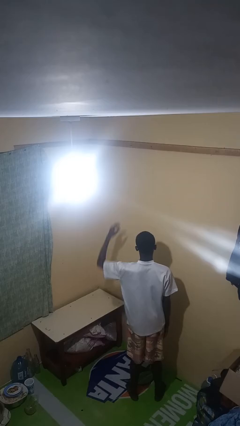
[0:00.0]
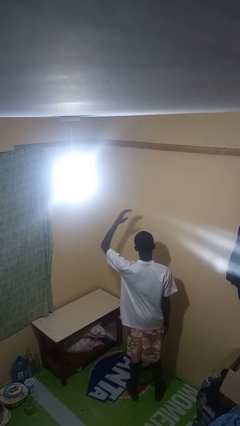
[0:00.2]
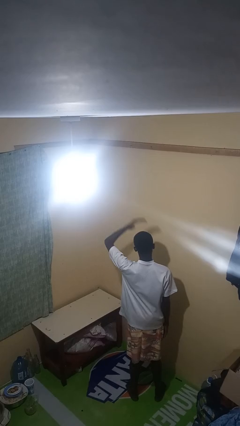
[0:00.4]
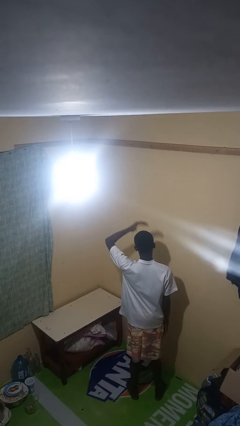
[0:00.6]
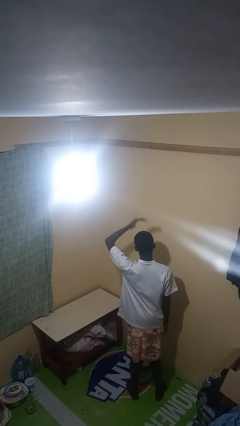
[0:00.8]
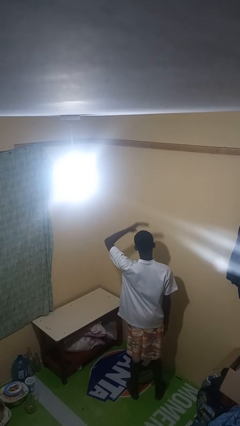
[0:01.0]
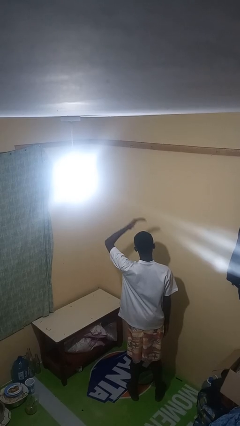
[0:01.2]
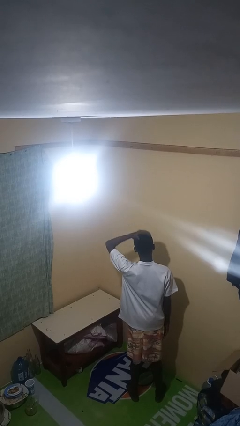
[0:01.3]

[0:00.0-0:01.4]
person pats head

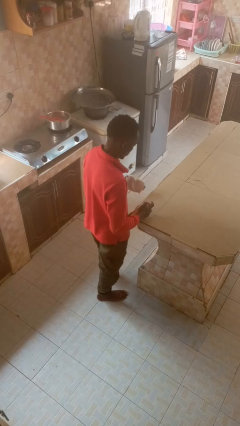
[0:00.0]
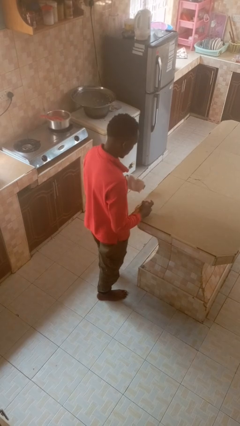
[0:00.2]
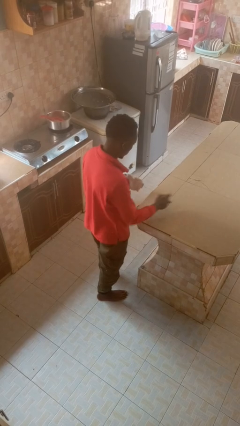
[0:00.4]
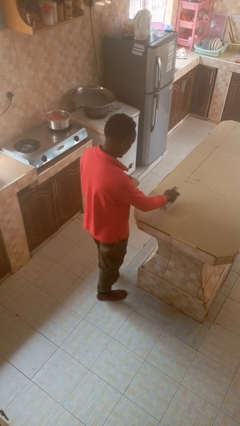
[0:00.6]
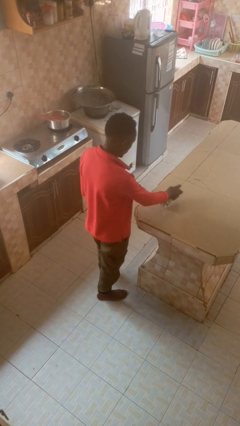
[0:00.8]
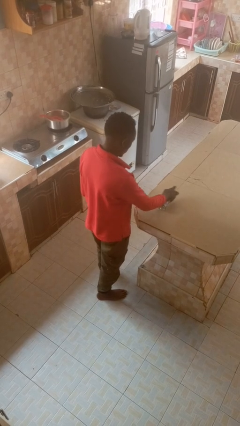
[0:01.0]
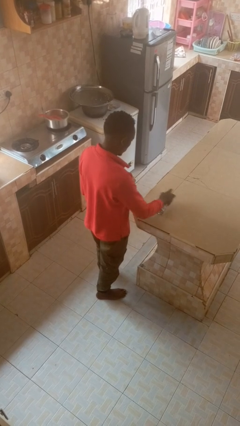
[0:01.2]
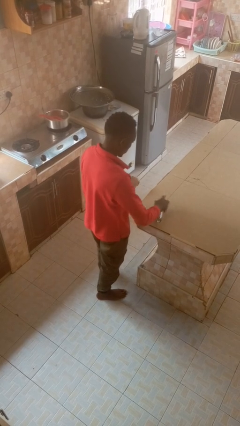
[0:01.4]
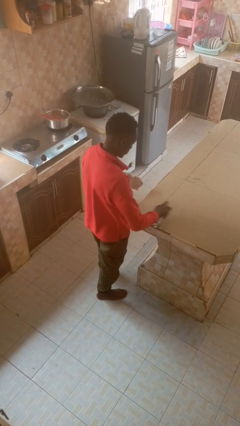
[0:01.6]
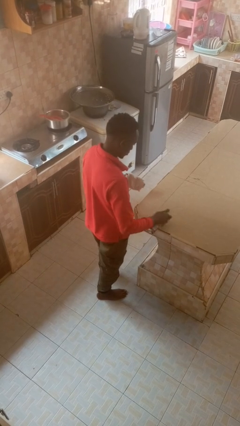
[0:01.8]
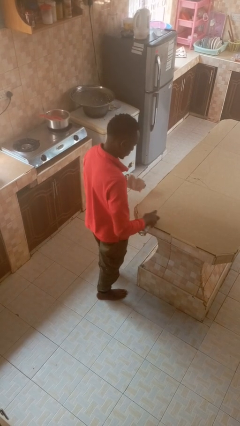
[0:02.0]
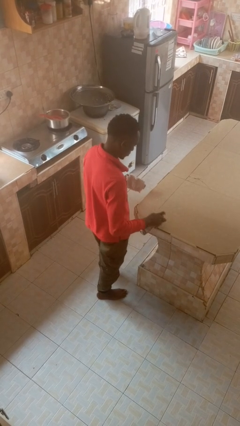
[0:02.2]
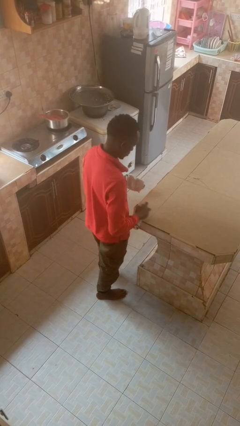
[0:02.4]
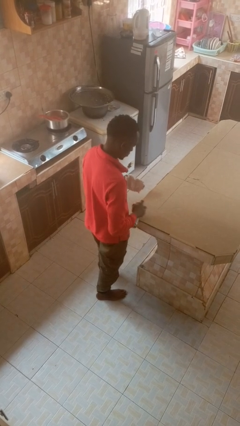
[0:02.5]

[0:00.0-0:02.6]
person sprays from bottle

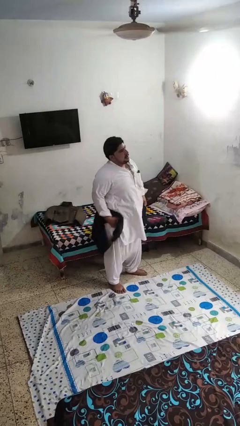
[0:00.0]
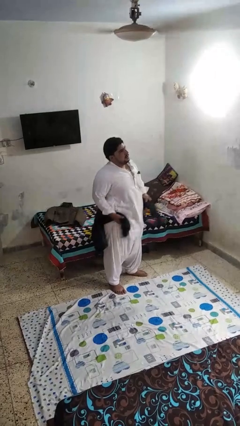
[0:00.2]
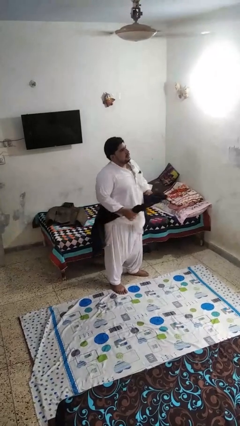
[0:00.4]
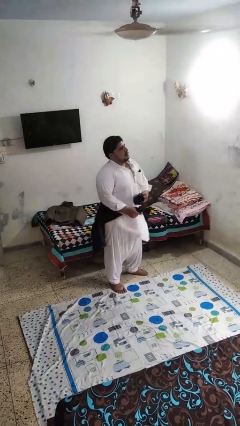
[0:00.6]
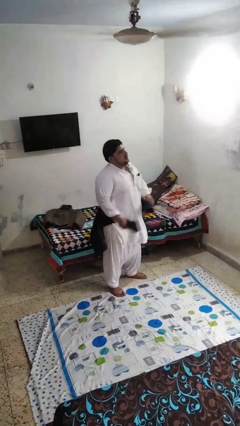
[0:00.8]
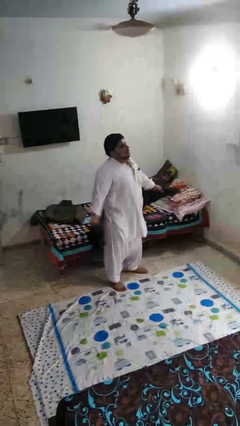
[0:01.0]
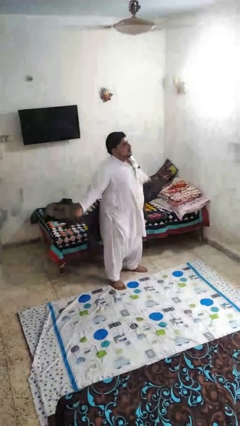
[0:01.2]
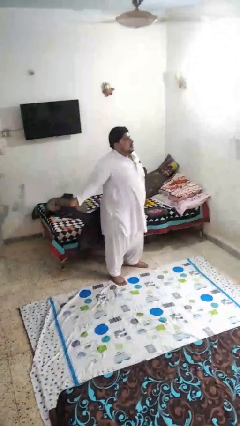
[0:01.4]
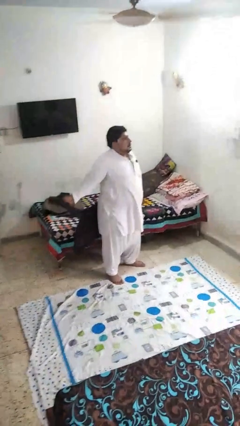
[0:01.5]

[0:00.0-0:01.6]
person unties jacket around waist

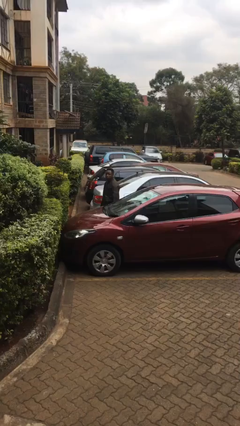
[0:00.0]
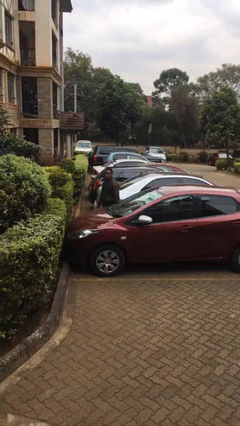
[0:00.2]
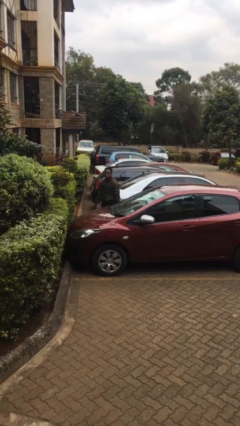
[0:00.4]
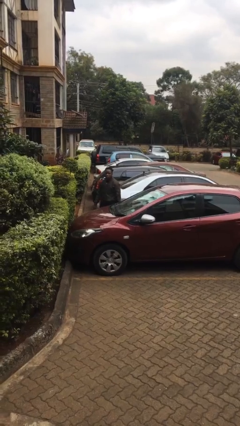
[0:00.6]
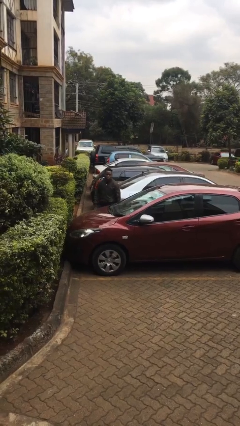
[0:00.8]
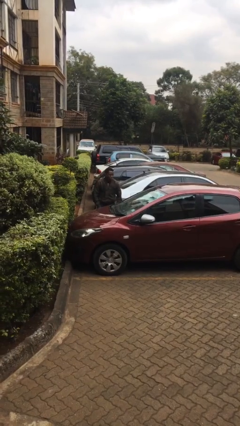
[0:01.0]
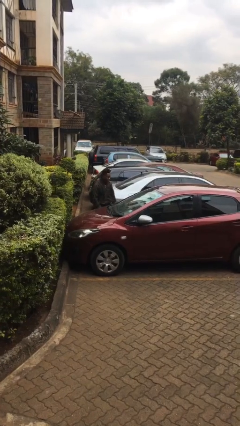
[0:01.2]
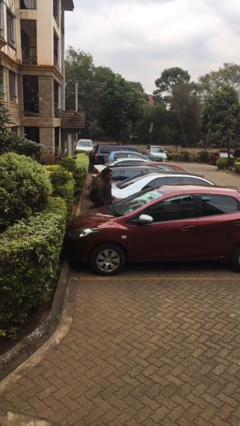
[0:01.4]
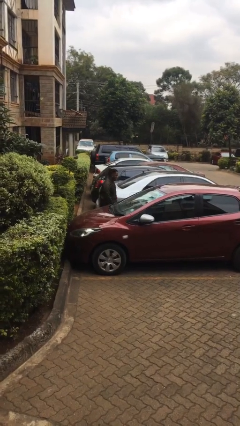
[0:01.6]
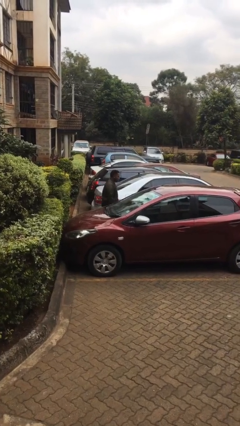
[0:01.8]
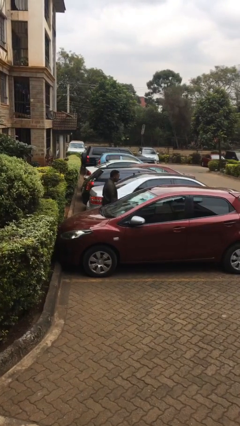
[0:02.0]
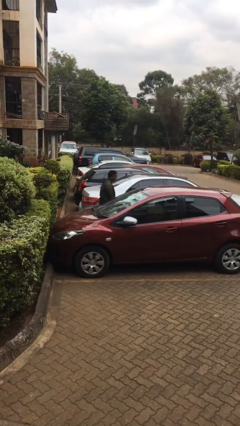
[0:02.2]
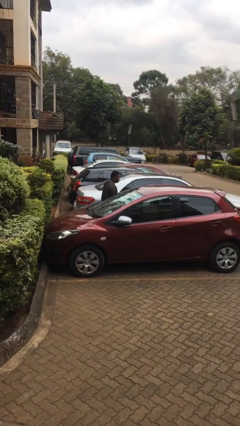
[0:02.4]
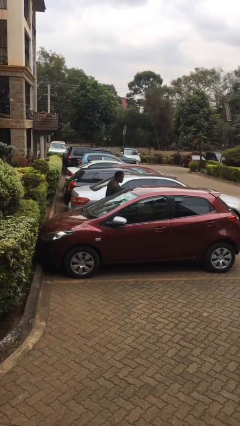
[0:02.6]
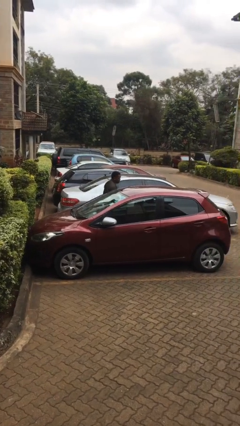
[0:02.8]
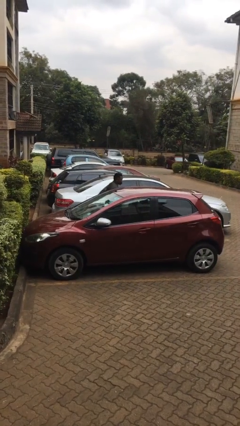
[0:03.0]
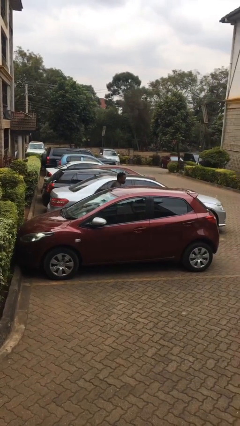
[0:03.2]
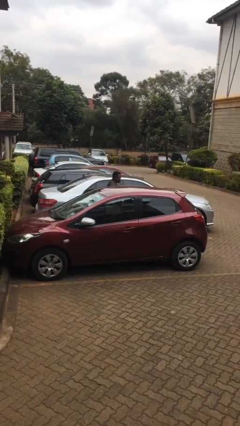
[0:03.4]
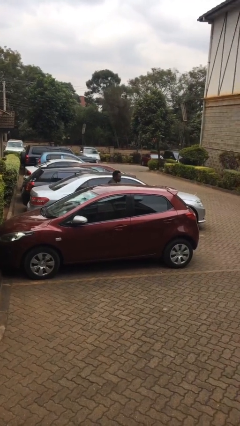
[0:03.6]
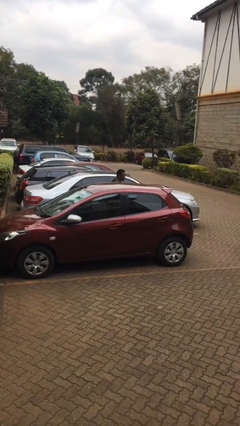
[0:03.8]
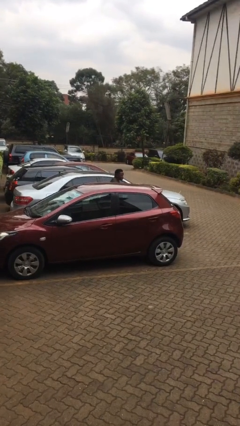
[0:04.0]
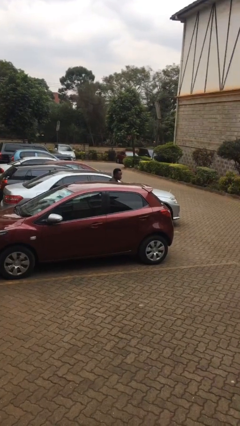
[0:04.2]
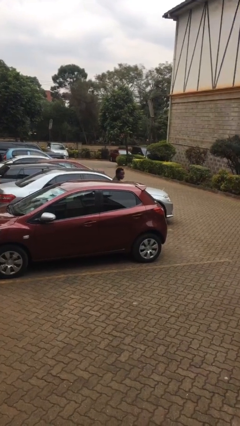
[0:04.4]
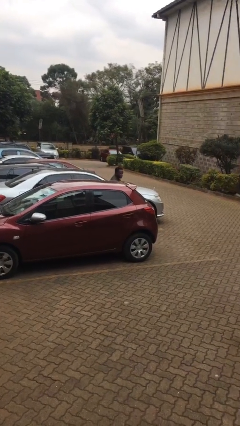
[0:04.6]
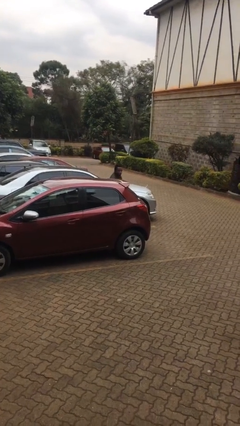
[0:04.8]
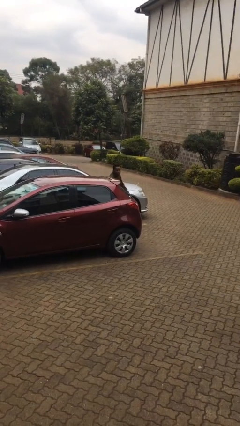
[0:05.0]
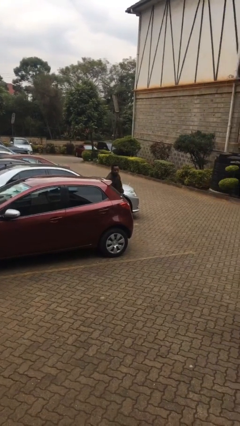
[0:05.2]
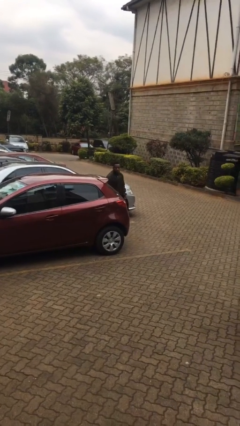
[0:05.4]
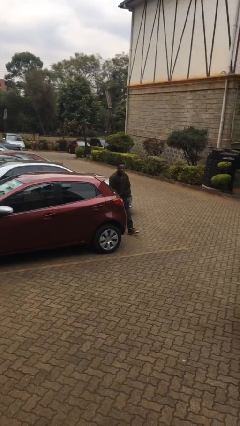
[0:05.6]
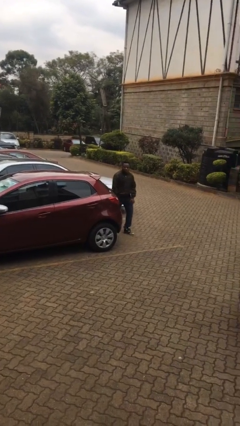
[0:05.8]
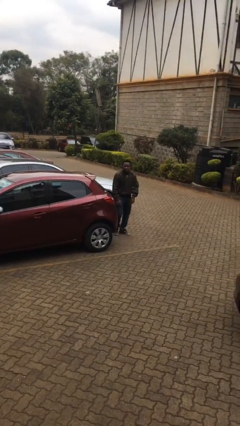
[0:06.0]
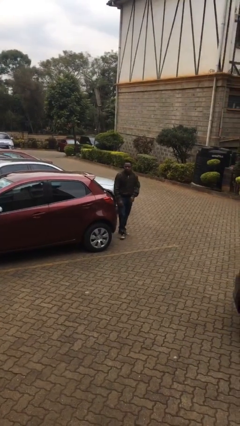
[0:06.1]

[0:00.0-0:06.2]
person walks around car

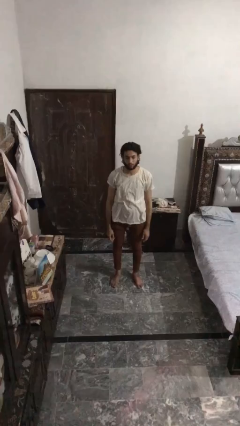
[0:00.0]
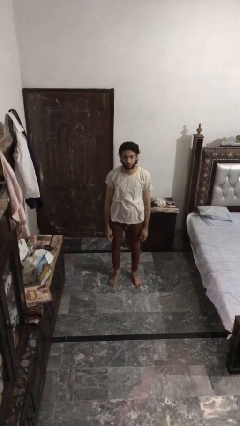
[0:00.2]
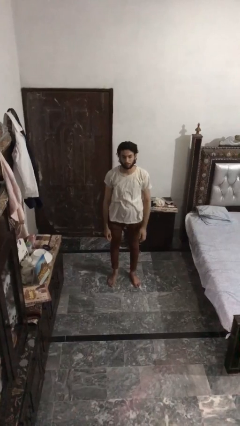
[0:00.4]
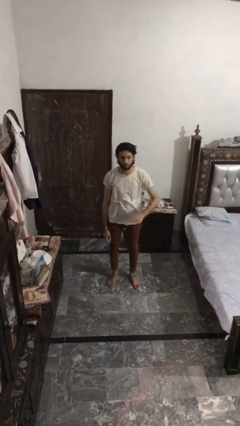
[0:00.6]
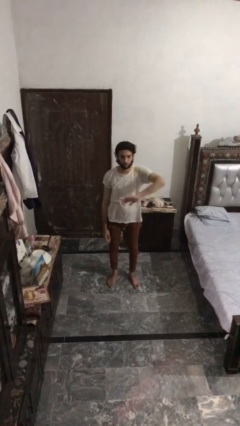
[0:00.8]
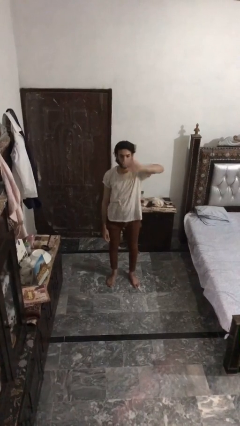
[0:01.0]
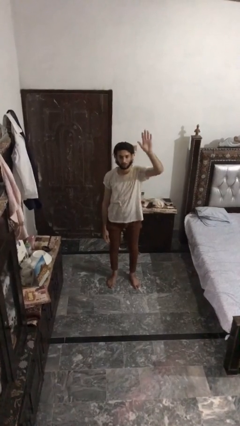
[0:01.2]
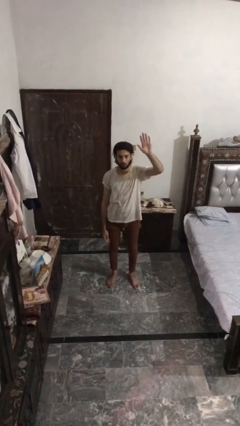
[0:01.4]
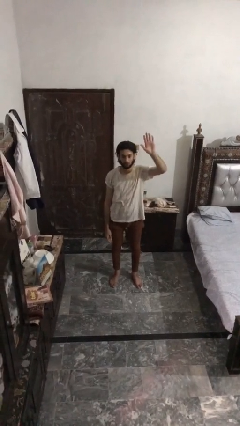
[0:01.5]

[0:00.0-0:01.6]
person gestures swipe up

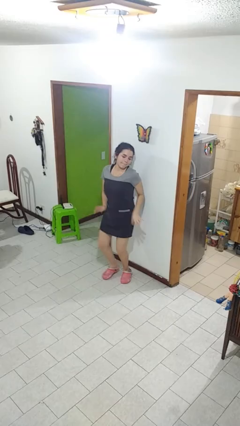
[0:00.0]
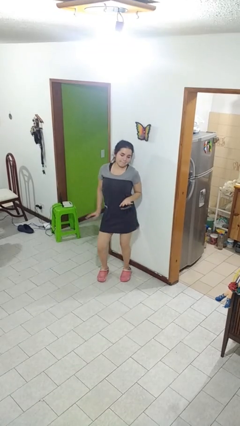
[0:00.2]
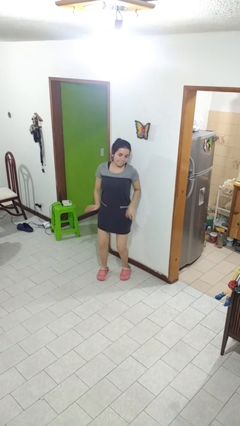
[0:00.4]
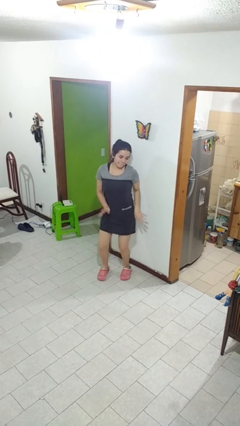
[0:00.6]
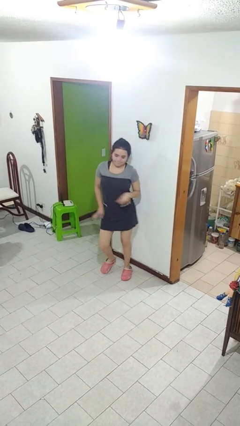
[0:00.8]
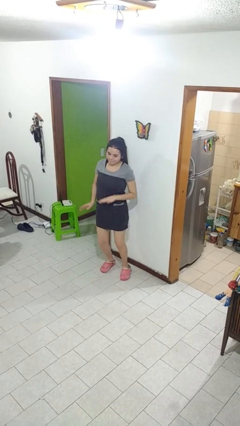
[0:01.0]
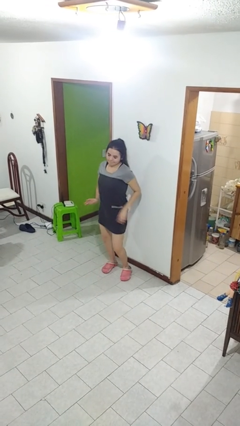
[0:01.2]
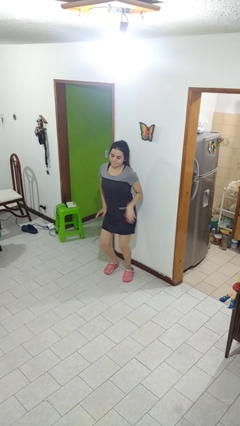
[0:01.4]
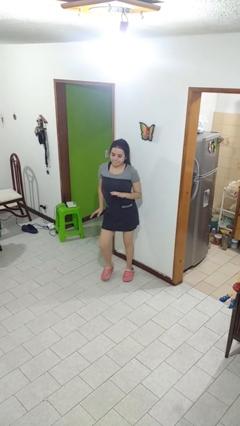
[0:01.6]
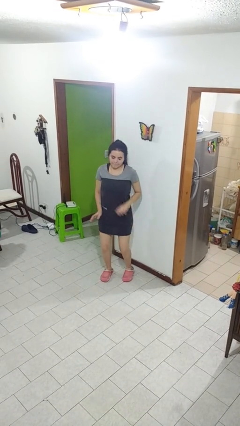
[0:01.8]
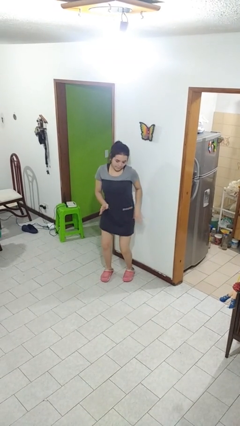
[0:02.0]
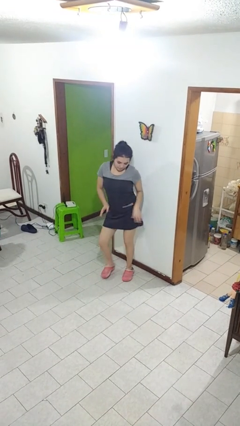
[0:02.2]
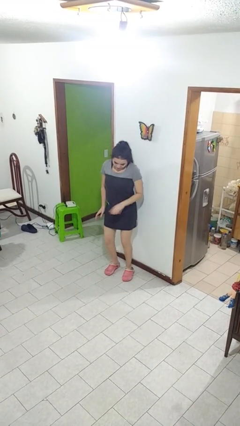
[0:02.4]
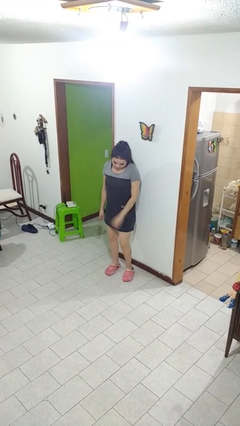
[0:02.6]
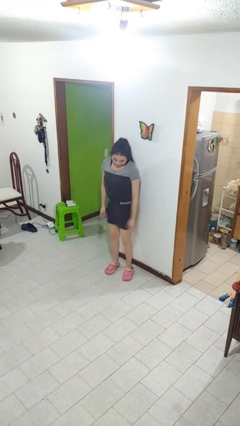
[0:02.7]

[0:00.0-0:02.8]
person dances in place

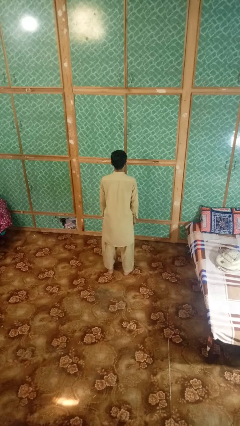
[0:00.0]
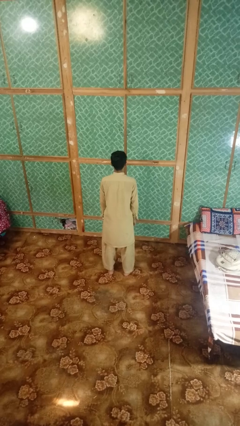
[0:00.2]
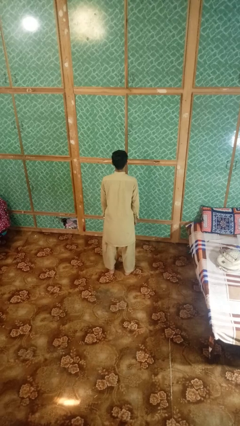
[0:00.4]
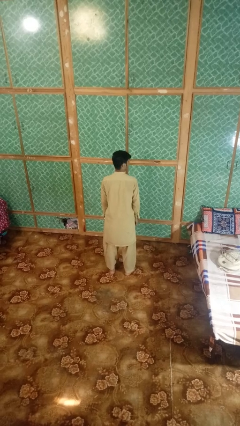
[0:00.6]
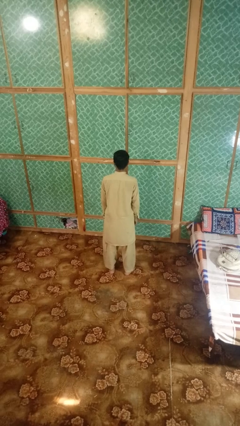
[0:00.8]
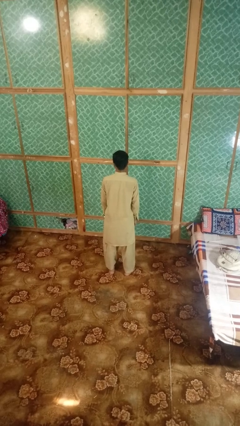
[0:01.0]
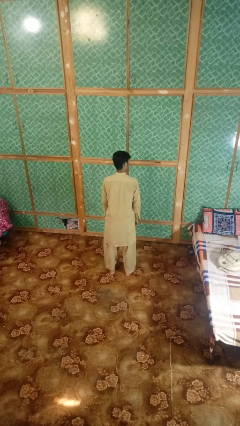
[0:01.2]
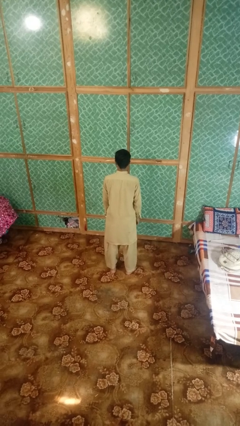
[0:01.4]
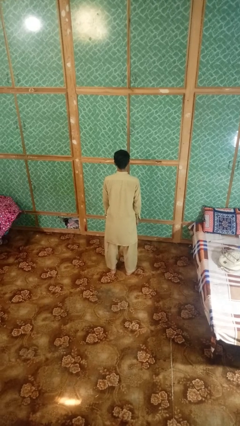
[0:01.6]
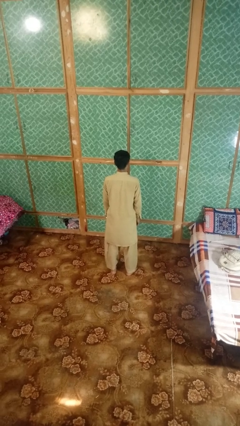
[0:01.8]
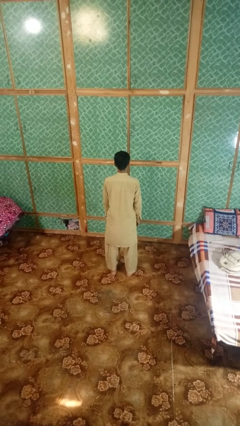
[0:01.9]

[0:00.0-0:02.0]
person nods head
